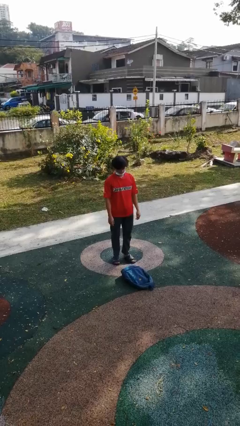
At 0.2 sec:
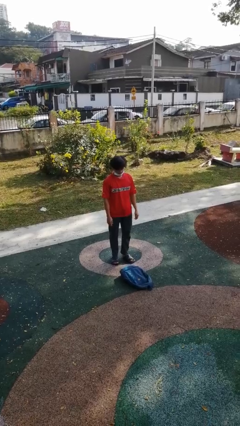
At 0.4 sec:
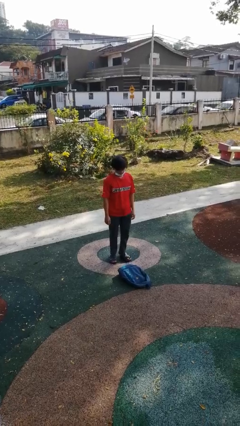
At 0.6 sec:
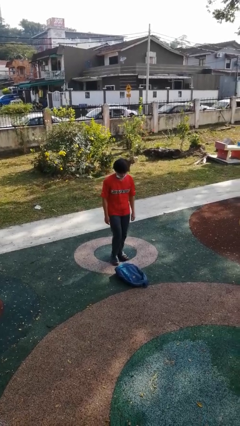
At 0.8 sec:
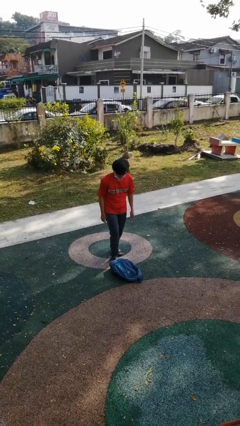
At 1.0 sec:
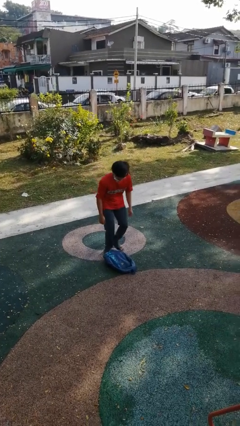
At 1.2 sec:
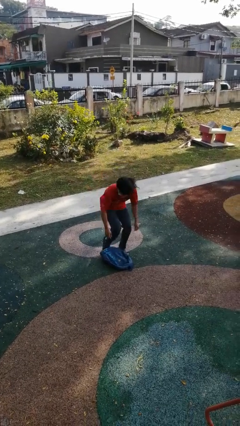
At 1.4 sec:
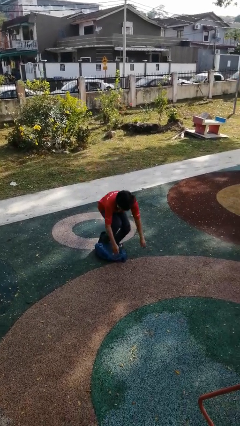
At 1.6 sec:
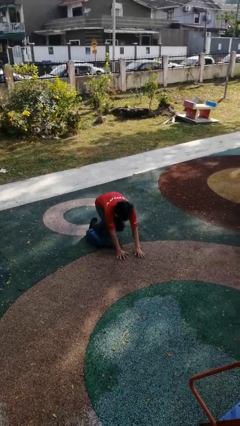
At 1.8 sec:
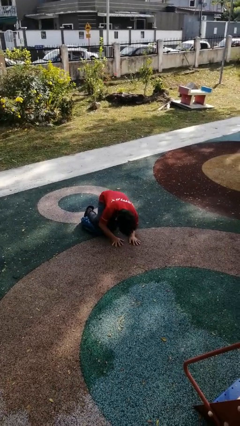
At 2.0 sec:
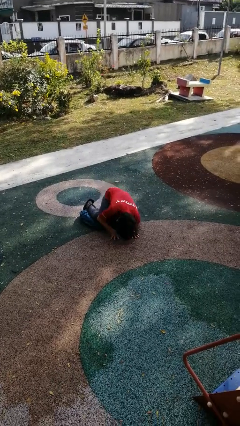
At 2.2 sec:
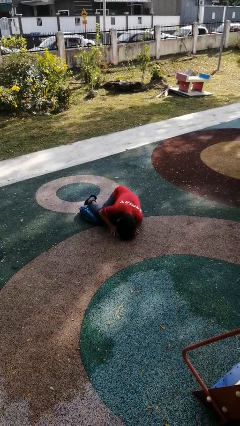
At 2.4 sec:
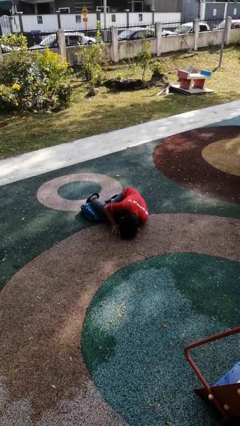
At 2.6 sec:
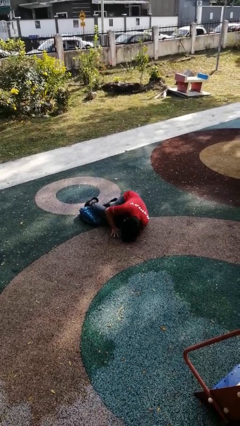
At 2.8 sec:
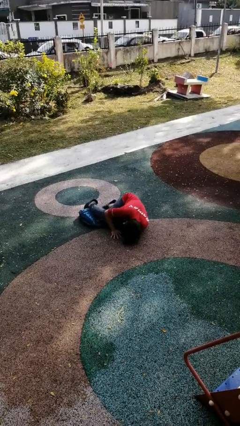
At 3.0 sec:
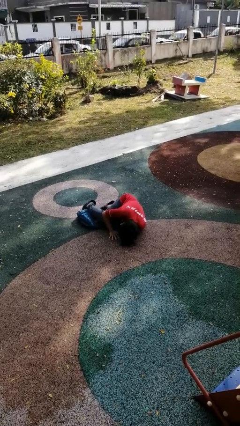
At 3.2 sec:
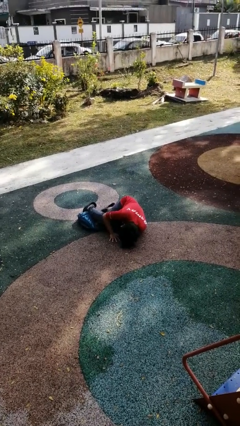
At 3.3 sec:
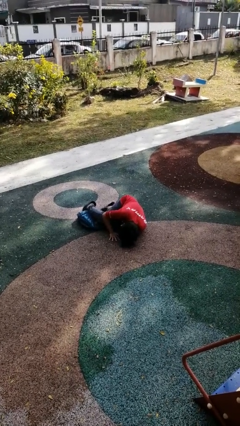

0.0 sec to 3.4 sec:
person trips on object on floor

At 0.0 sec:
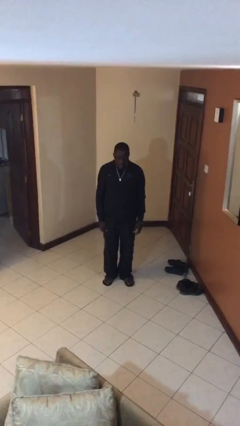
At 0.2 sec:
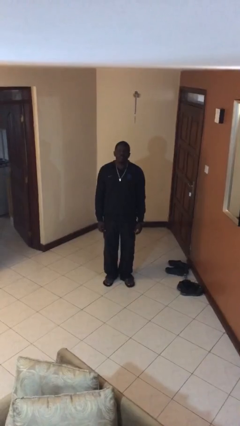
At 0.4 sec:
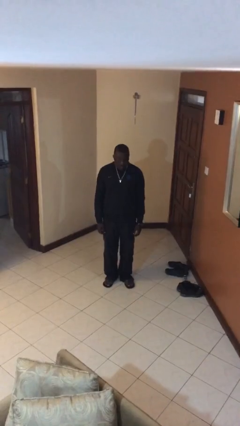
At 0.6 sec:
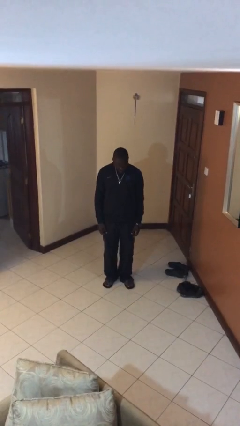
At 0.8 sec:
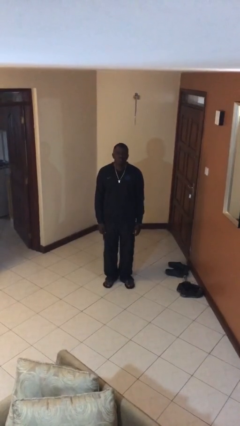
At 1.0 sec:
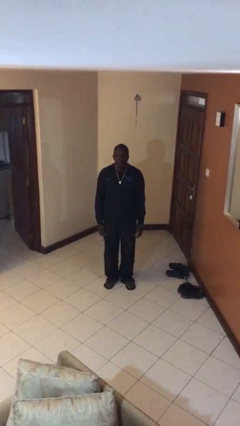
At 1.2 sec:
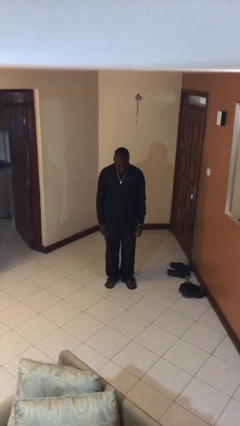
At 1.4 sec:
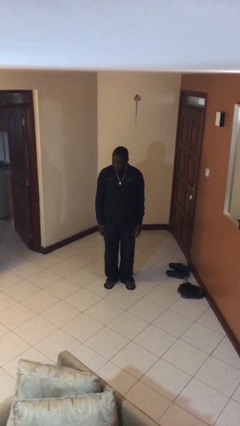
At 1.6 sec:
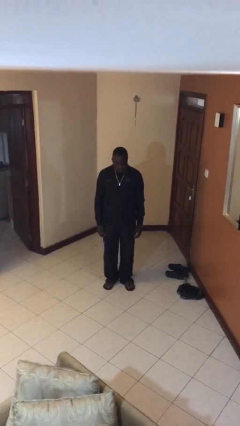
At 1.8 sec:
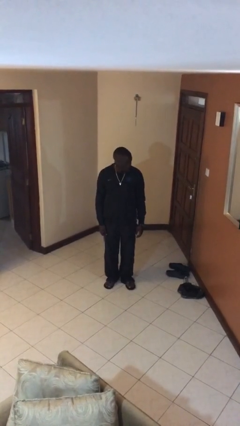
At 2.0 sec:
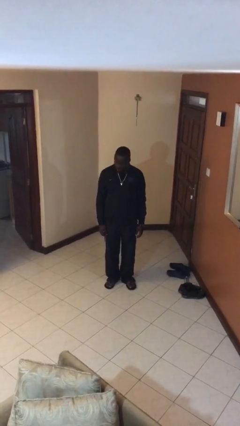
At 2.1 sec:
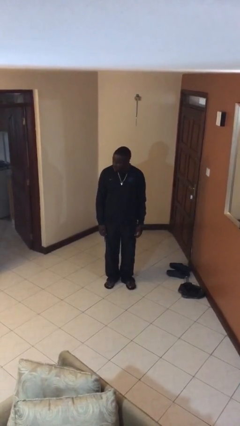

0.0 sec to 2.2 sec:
person nods head

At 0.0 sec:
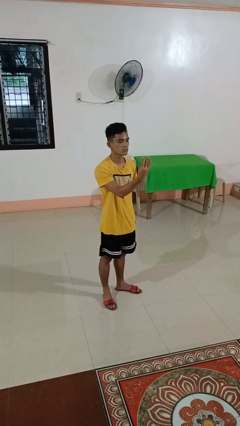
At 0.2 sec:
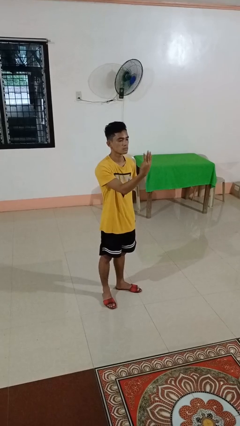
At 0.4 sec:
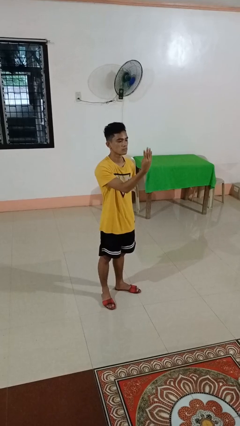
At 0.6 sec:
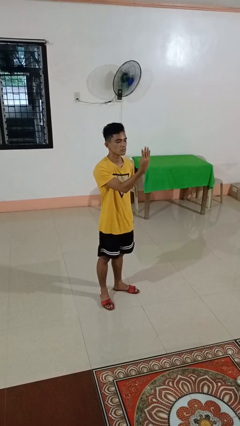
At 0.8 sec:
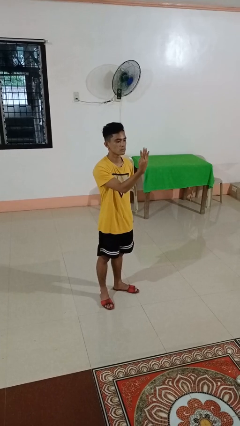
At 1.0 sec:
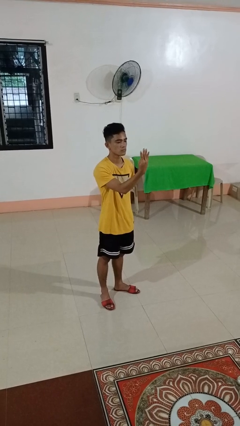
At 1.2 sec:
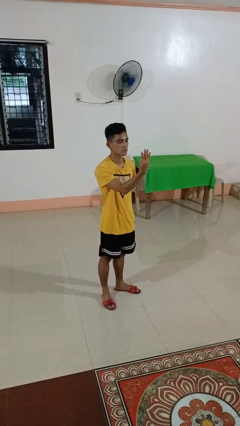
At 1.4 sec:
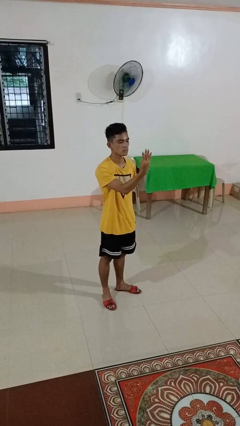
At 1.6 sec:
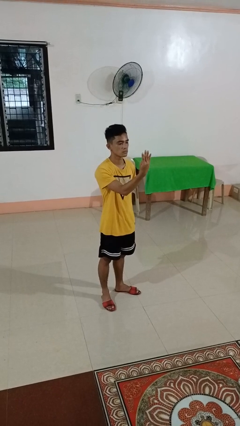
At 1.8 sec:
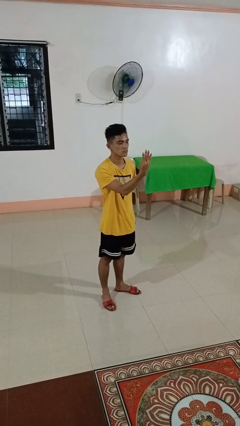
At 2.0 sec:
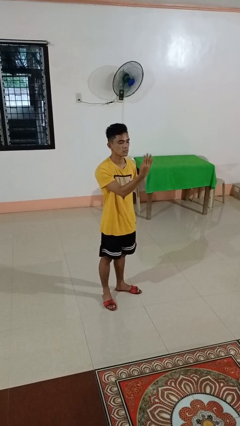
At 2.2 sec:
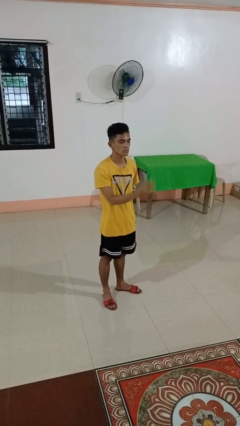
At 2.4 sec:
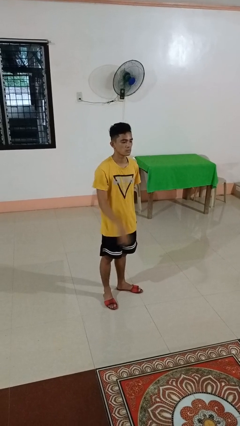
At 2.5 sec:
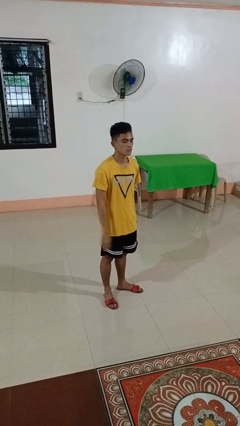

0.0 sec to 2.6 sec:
person gestures number four

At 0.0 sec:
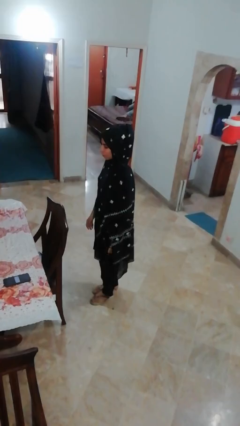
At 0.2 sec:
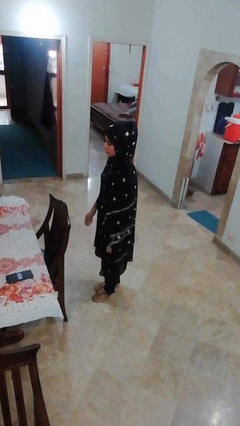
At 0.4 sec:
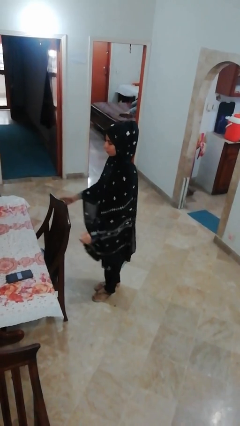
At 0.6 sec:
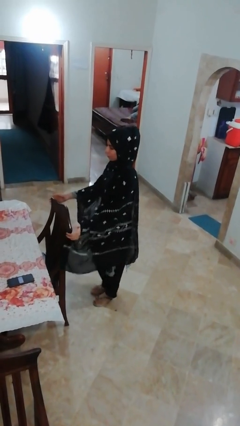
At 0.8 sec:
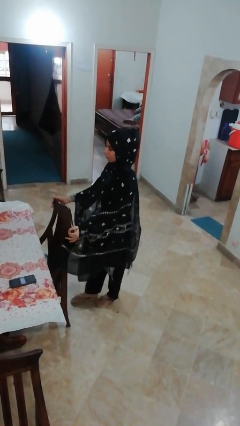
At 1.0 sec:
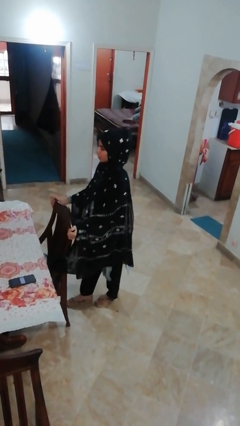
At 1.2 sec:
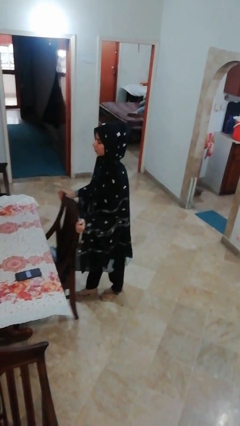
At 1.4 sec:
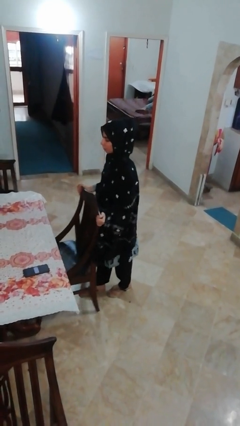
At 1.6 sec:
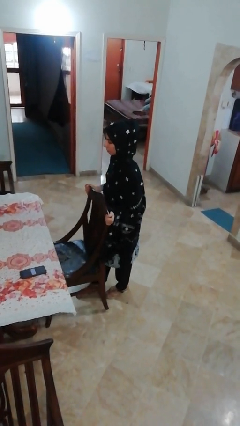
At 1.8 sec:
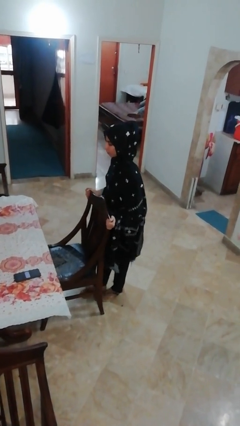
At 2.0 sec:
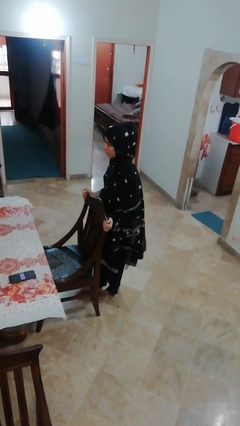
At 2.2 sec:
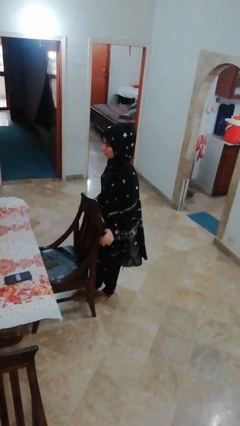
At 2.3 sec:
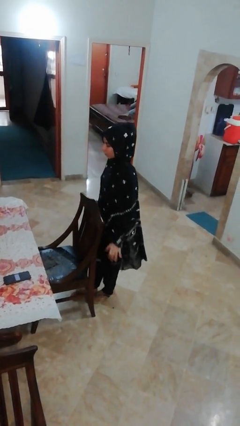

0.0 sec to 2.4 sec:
person pulls out chair

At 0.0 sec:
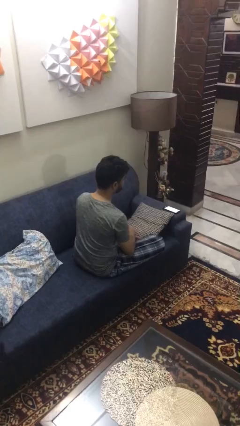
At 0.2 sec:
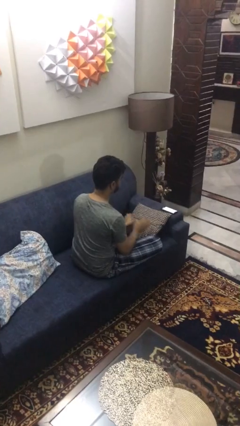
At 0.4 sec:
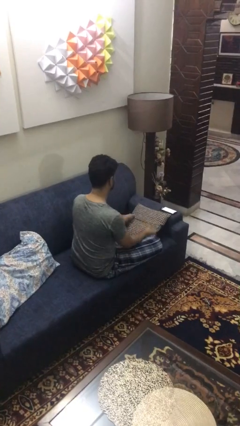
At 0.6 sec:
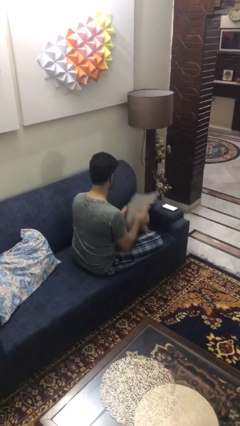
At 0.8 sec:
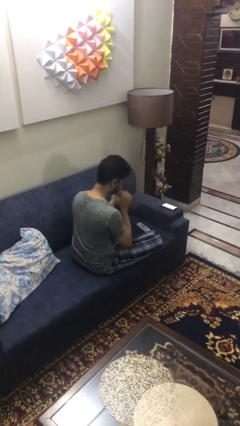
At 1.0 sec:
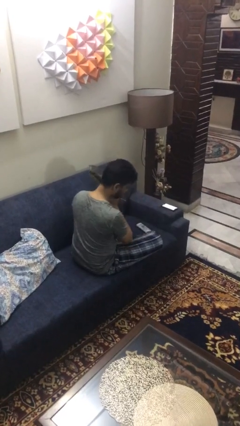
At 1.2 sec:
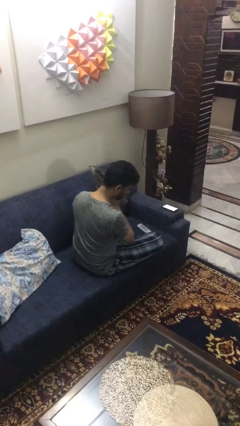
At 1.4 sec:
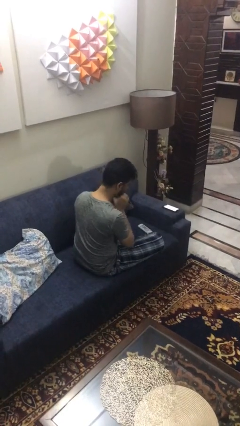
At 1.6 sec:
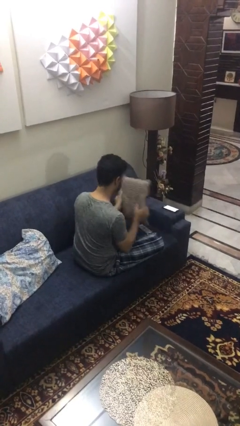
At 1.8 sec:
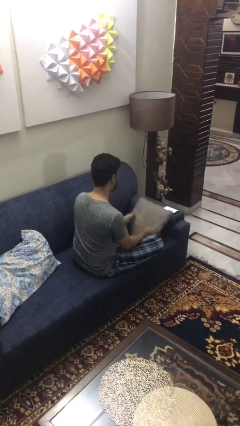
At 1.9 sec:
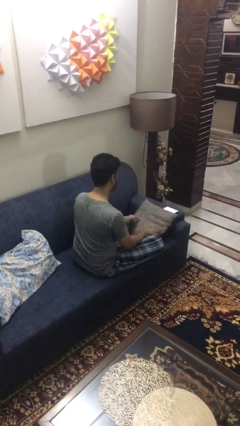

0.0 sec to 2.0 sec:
person searches in couch

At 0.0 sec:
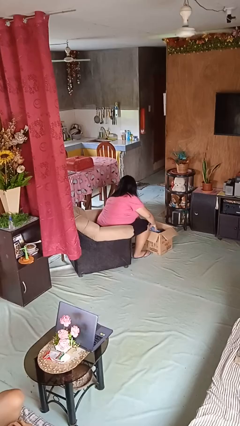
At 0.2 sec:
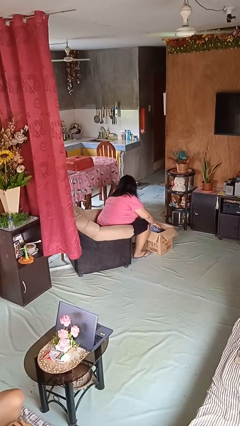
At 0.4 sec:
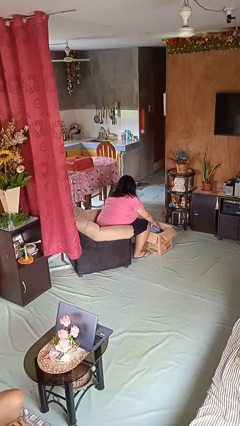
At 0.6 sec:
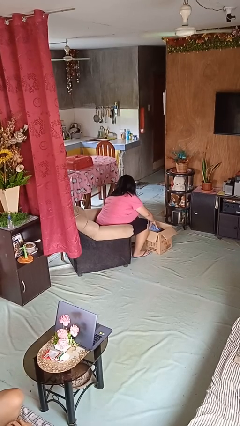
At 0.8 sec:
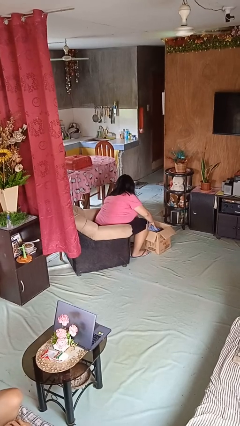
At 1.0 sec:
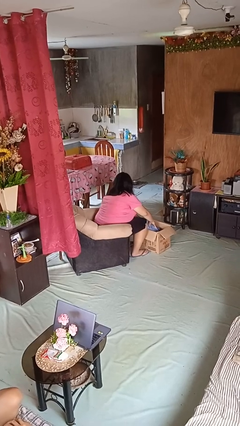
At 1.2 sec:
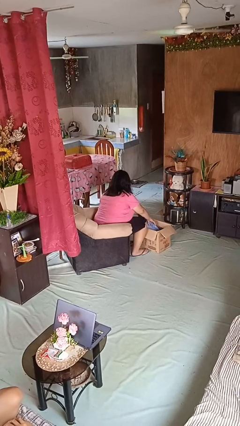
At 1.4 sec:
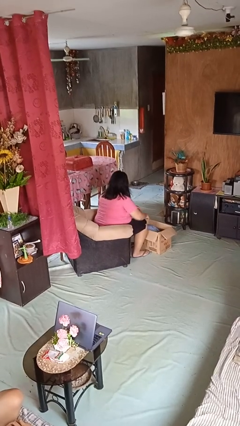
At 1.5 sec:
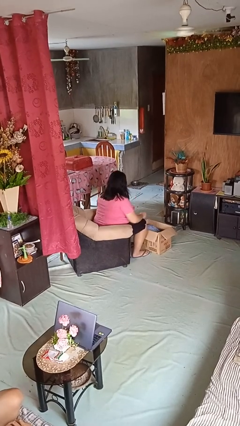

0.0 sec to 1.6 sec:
person searches in box

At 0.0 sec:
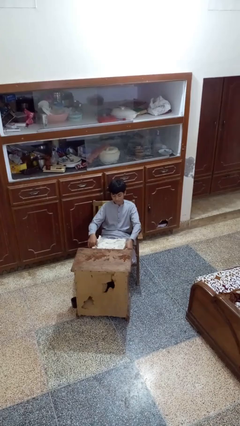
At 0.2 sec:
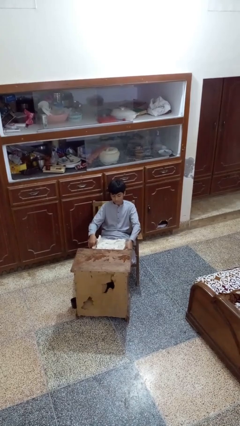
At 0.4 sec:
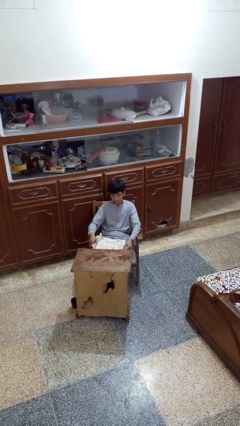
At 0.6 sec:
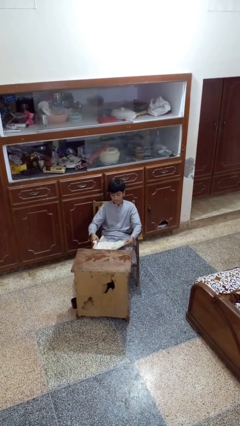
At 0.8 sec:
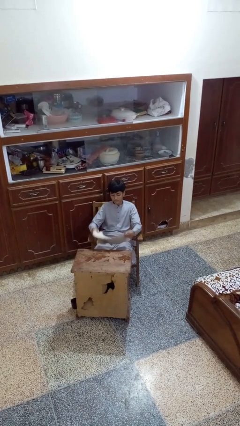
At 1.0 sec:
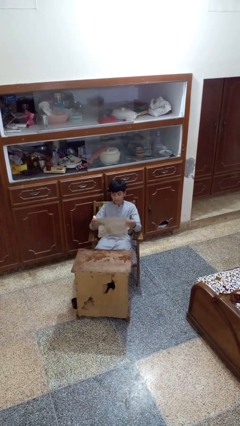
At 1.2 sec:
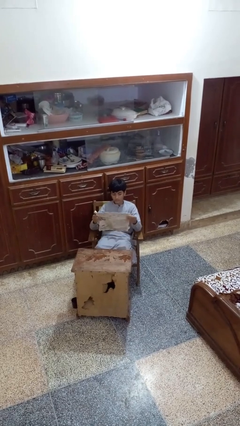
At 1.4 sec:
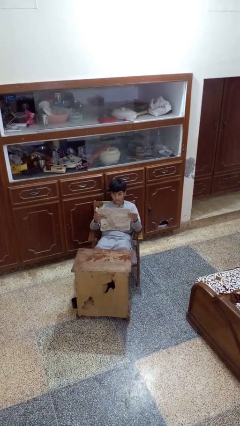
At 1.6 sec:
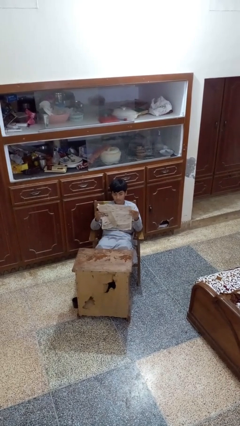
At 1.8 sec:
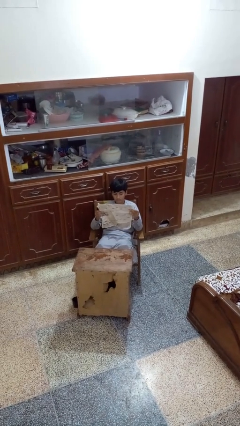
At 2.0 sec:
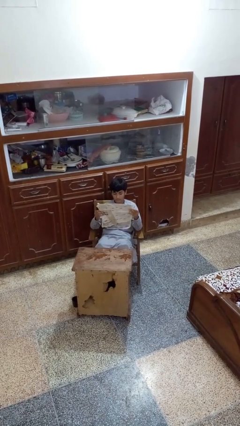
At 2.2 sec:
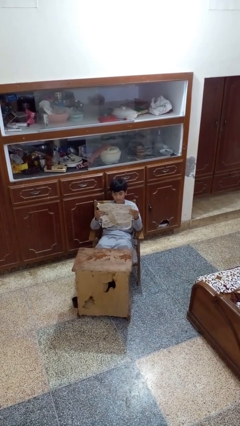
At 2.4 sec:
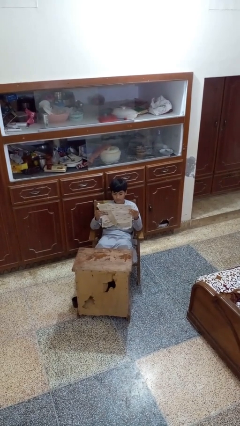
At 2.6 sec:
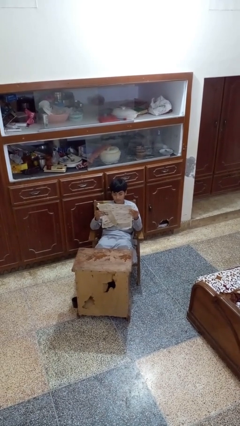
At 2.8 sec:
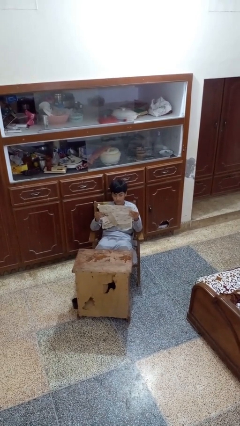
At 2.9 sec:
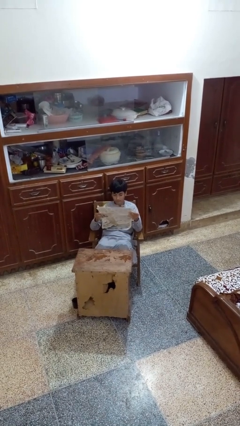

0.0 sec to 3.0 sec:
person reads newspaper
